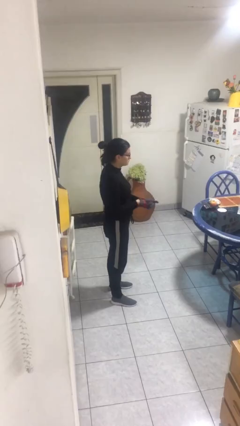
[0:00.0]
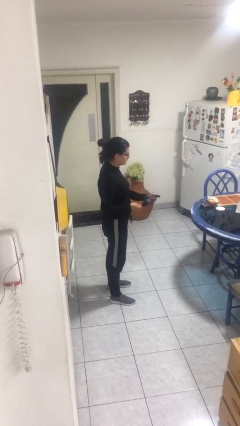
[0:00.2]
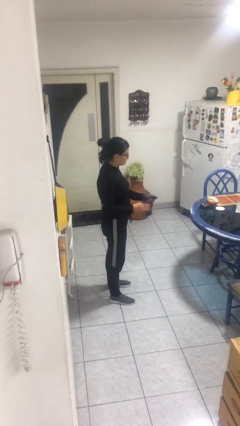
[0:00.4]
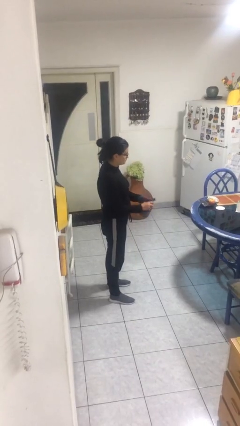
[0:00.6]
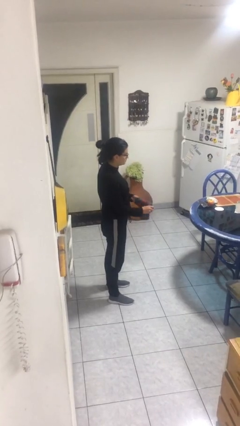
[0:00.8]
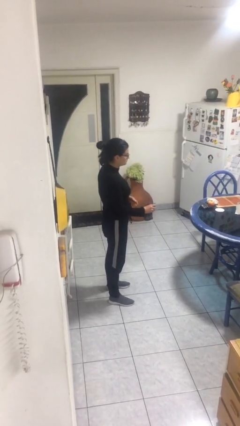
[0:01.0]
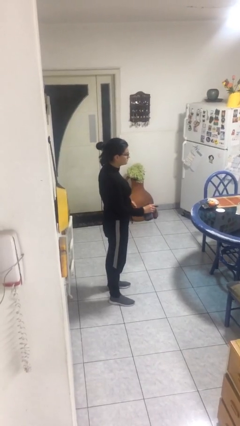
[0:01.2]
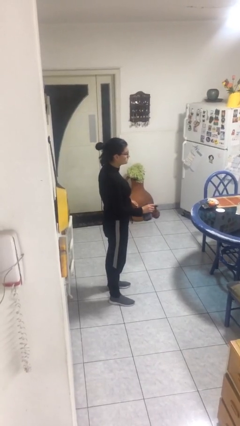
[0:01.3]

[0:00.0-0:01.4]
person takes off gloves

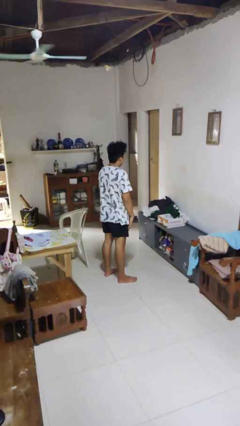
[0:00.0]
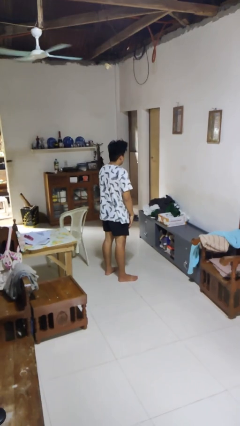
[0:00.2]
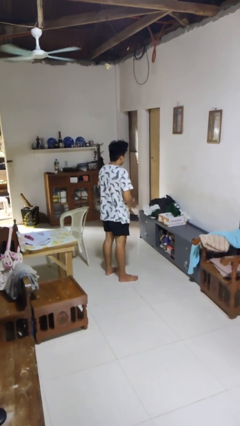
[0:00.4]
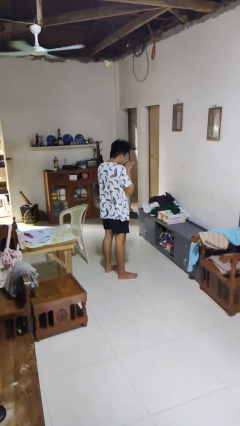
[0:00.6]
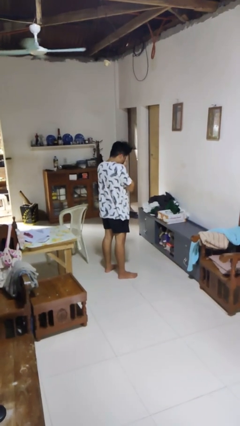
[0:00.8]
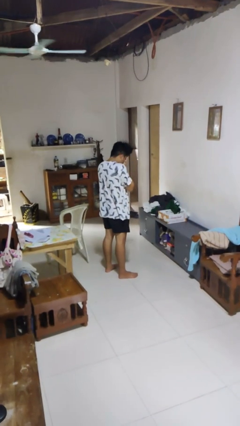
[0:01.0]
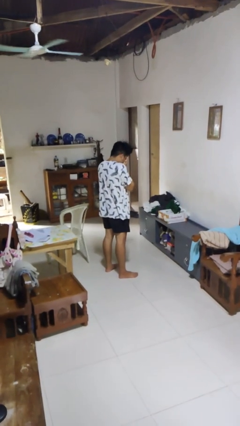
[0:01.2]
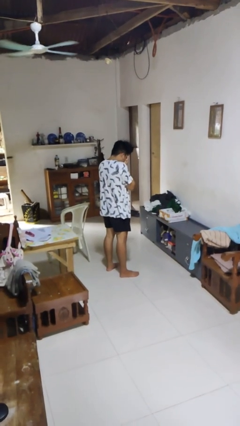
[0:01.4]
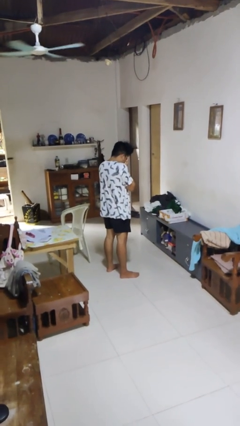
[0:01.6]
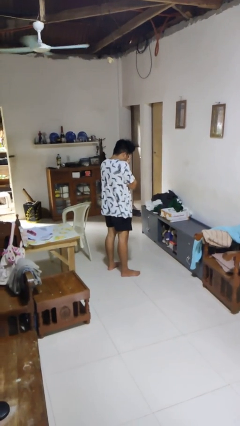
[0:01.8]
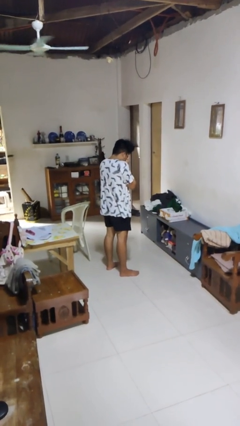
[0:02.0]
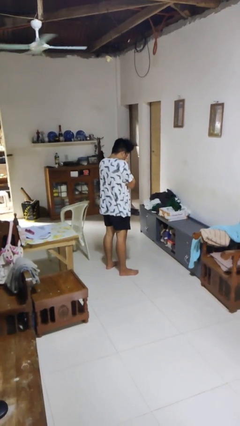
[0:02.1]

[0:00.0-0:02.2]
person covers face with hands

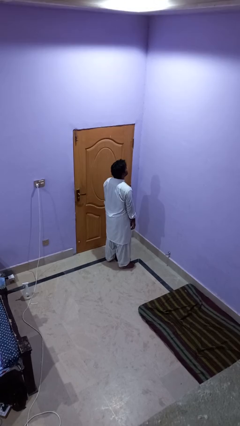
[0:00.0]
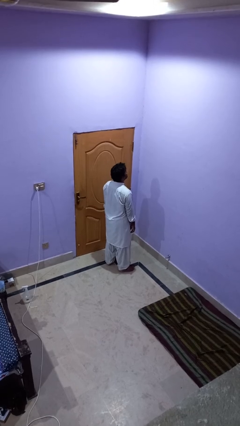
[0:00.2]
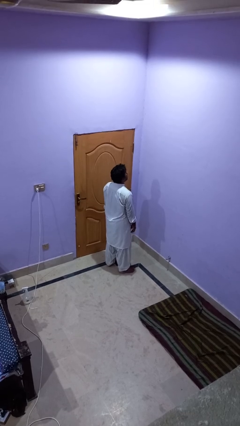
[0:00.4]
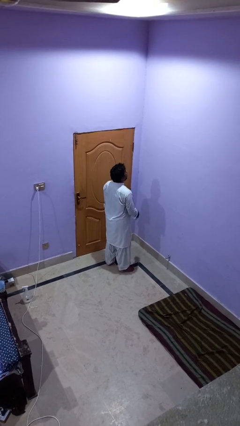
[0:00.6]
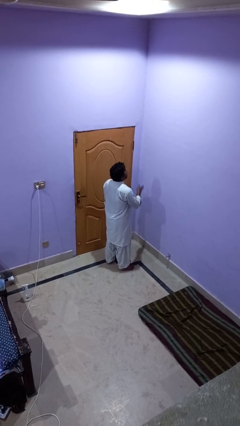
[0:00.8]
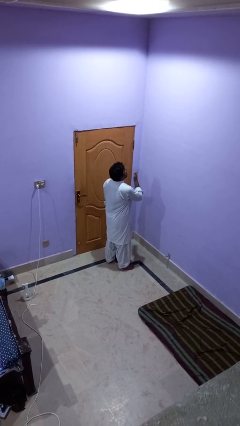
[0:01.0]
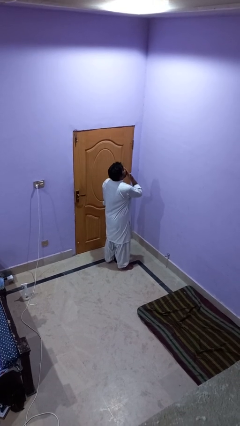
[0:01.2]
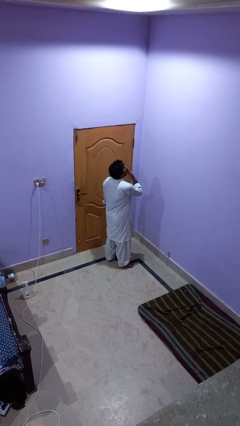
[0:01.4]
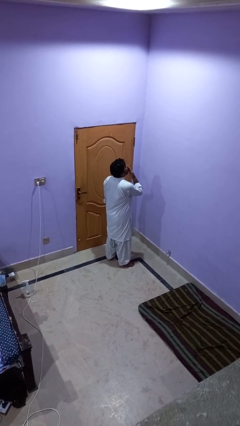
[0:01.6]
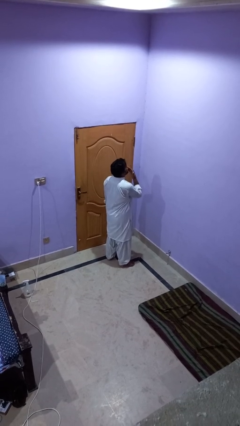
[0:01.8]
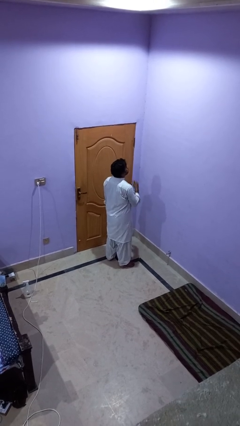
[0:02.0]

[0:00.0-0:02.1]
person yawns

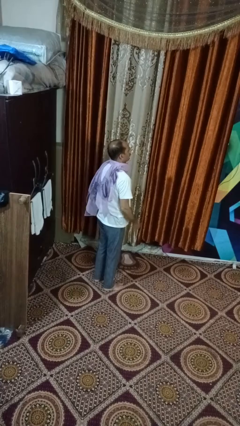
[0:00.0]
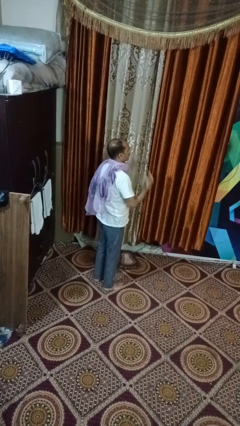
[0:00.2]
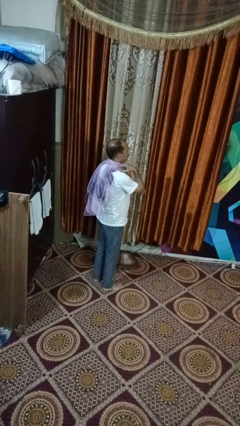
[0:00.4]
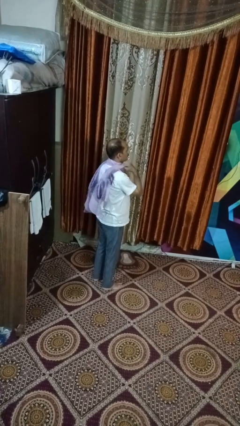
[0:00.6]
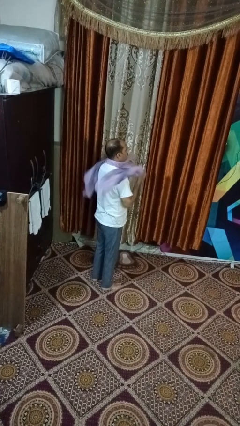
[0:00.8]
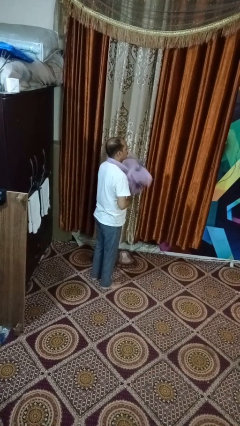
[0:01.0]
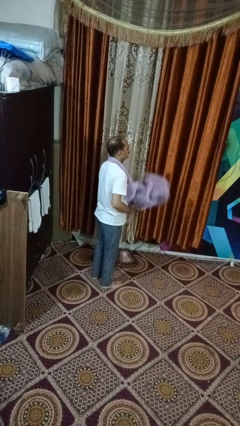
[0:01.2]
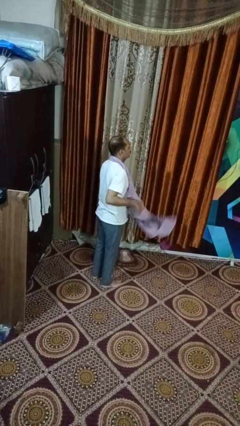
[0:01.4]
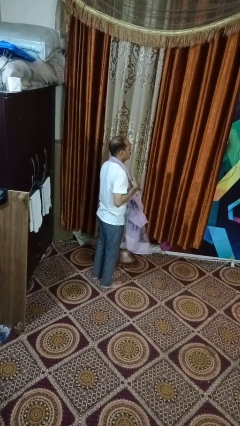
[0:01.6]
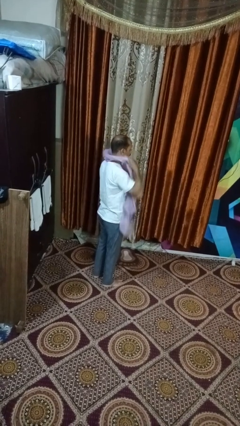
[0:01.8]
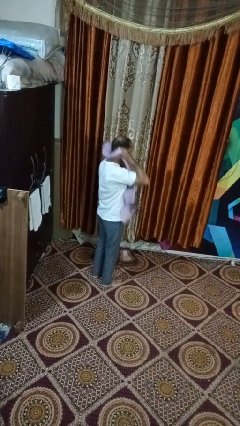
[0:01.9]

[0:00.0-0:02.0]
person takes off scarf

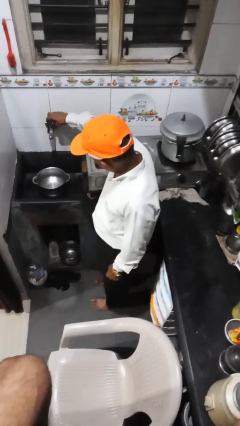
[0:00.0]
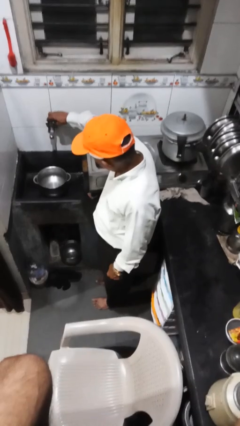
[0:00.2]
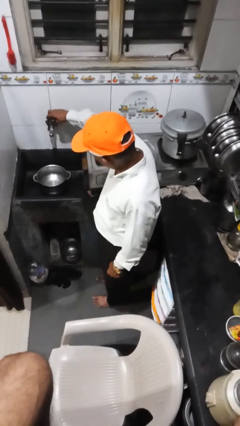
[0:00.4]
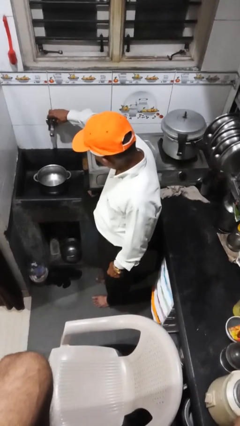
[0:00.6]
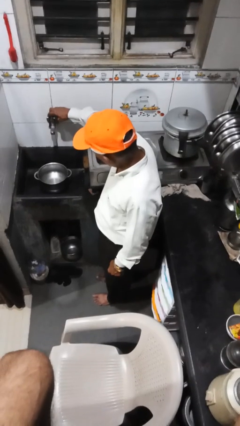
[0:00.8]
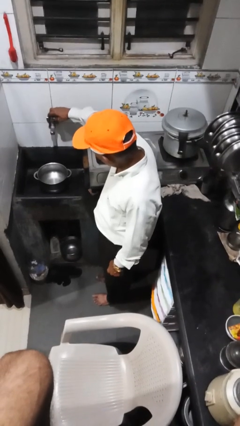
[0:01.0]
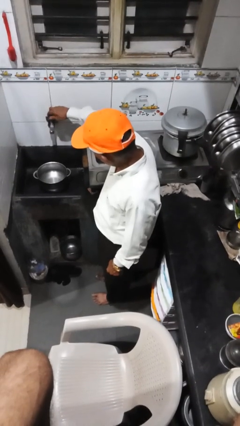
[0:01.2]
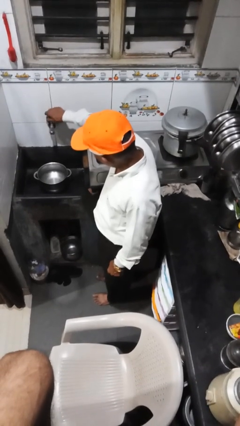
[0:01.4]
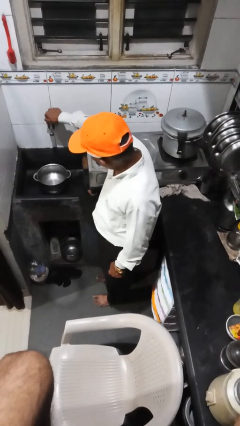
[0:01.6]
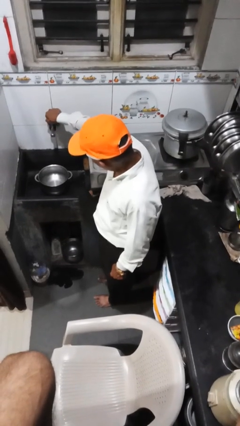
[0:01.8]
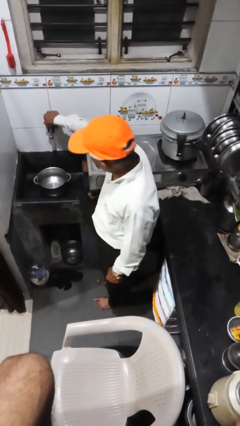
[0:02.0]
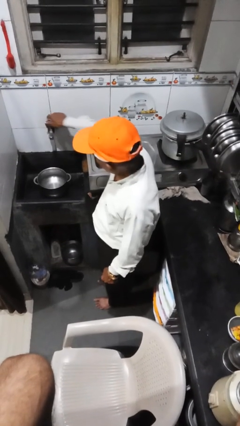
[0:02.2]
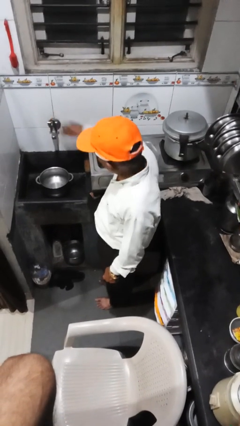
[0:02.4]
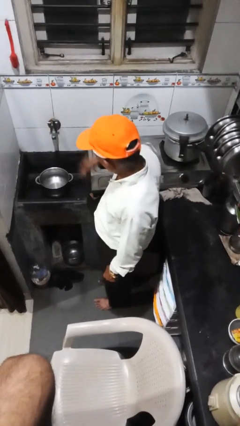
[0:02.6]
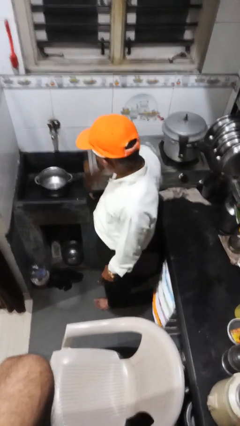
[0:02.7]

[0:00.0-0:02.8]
person turns off faucet

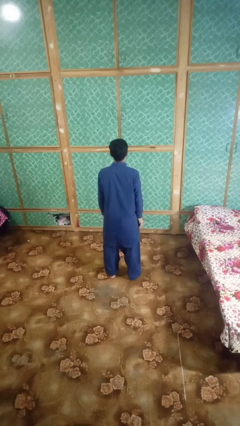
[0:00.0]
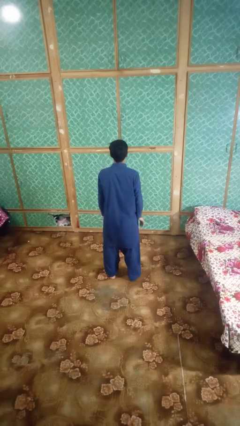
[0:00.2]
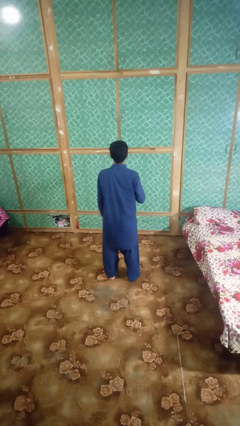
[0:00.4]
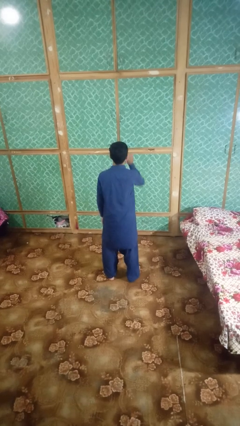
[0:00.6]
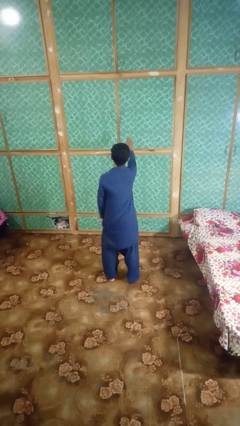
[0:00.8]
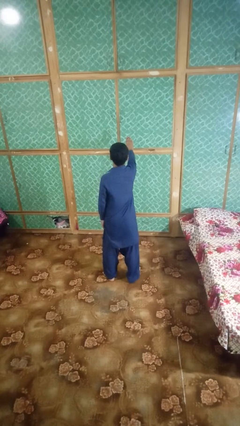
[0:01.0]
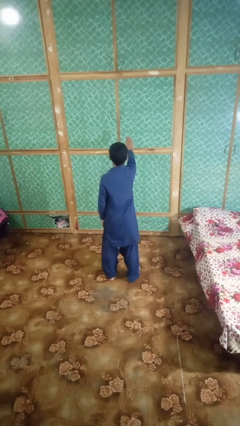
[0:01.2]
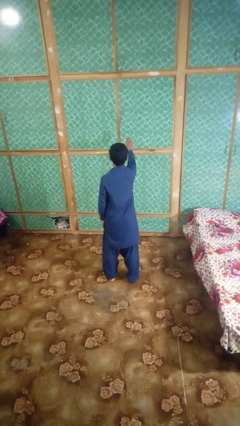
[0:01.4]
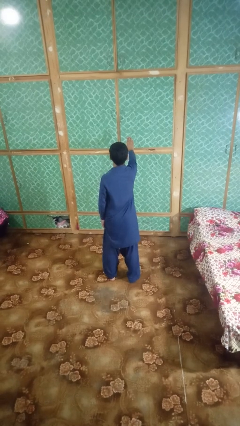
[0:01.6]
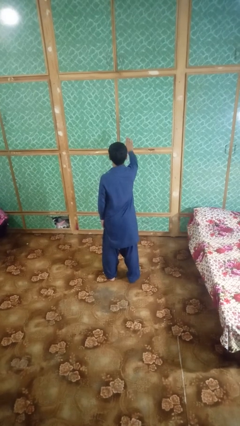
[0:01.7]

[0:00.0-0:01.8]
person gestures stop

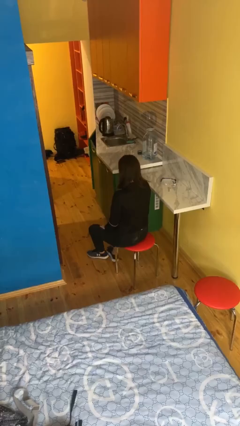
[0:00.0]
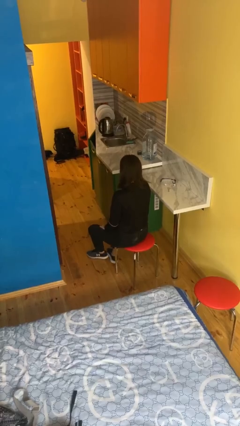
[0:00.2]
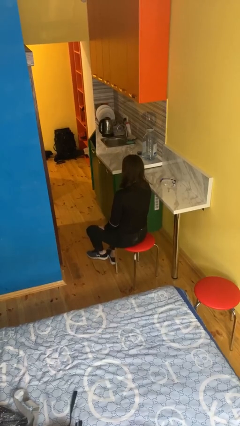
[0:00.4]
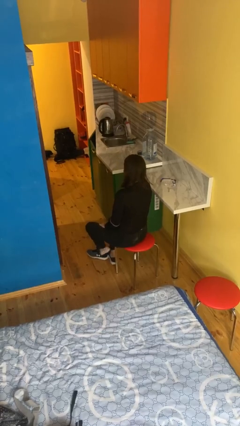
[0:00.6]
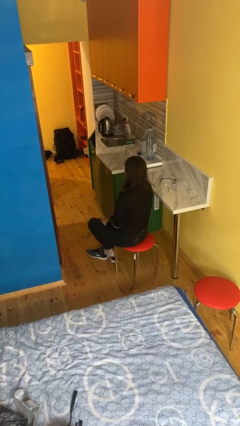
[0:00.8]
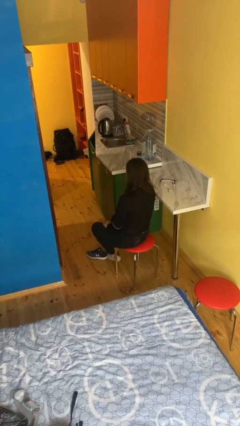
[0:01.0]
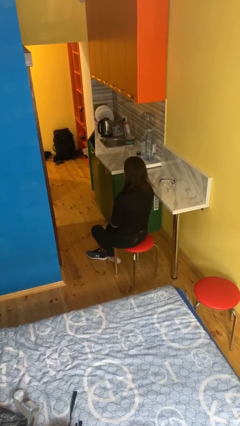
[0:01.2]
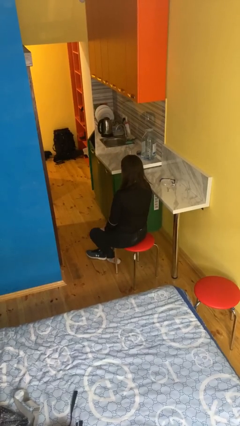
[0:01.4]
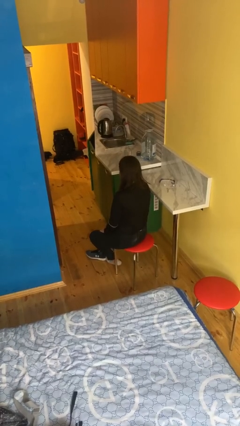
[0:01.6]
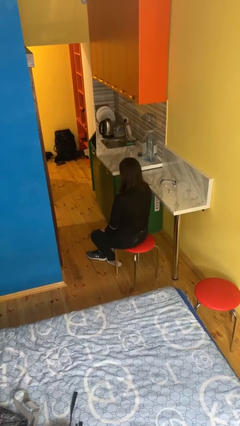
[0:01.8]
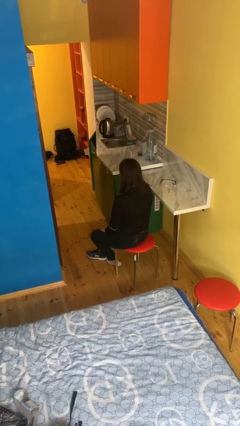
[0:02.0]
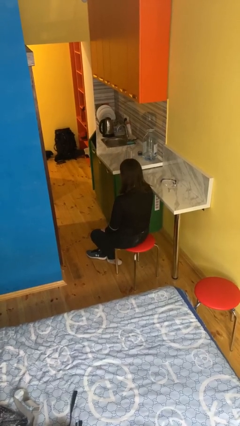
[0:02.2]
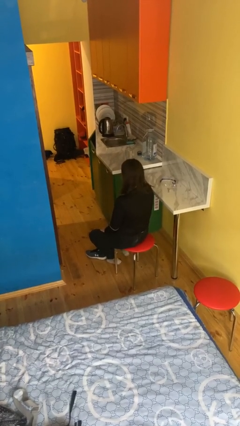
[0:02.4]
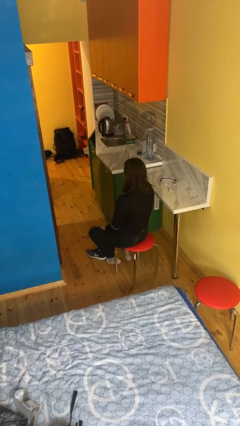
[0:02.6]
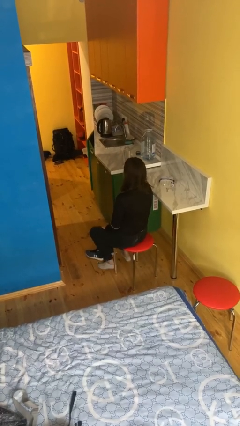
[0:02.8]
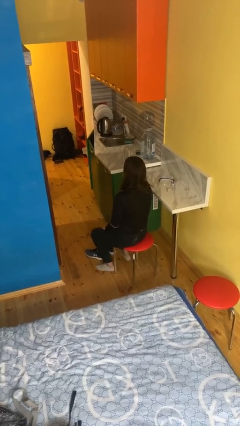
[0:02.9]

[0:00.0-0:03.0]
person takes off shoes

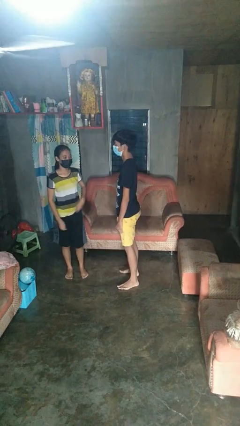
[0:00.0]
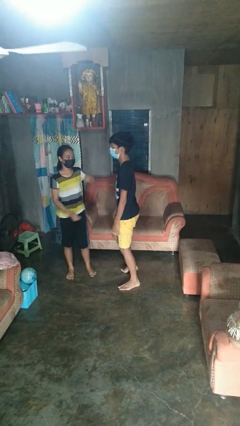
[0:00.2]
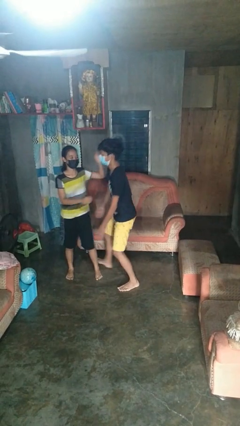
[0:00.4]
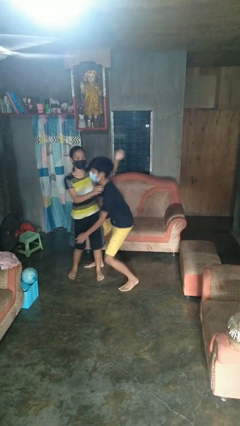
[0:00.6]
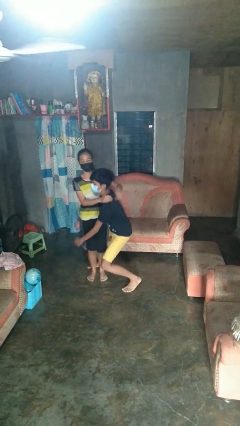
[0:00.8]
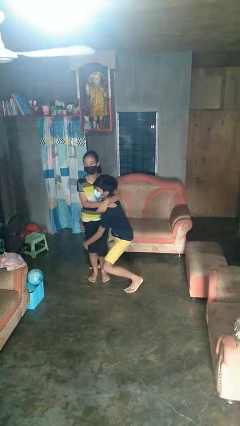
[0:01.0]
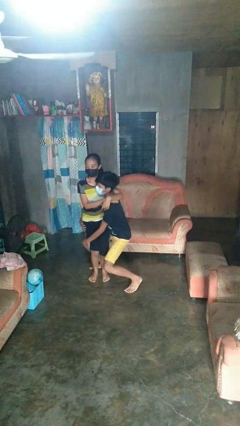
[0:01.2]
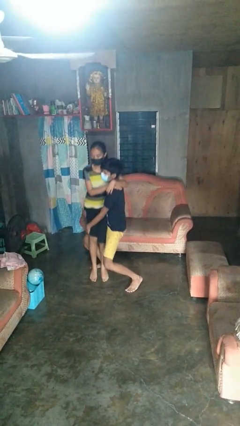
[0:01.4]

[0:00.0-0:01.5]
person picks up person
